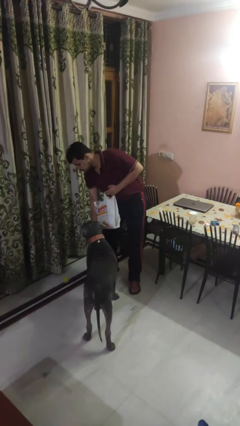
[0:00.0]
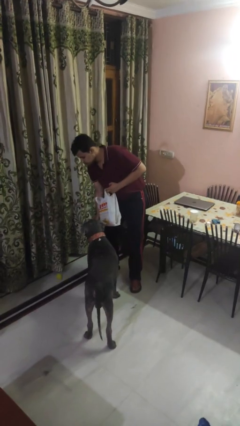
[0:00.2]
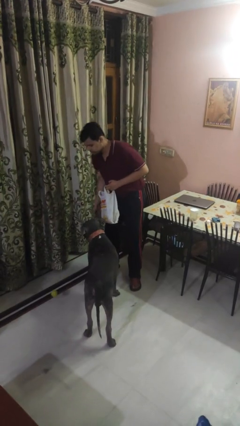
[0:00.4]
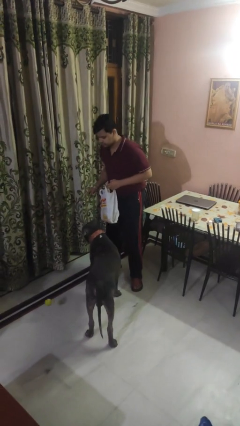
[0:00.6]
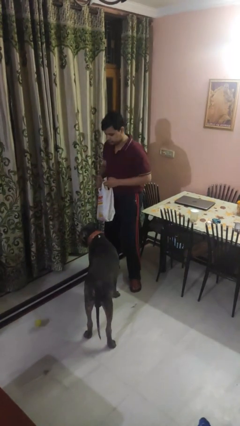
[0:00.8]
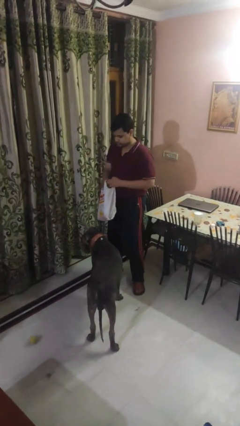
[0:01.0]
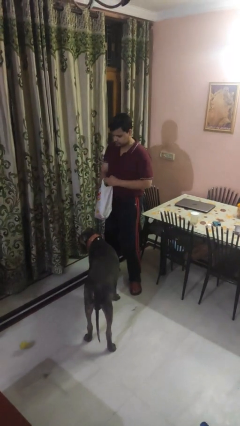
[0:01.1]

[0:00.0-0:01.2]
person throws object to dog

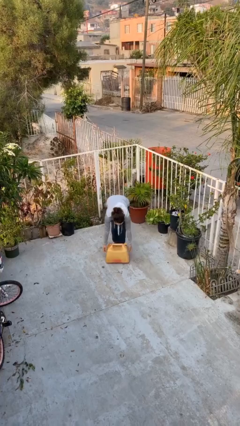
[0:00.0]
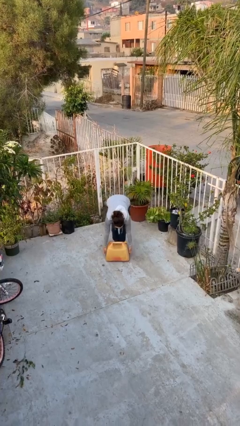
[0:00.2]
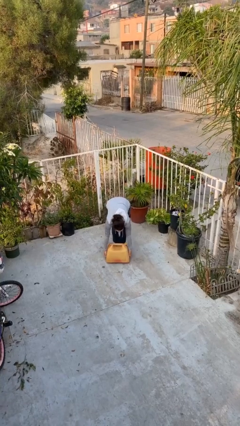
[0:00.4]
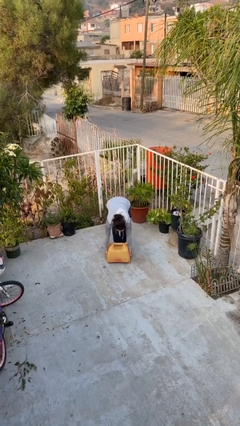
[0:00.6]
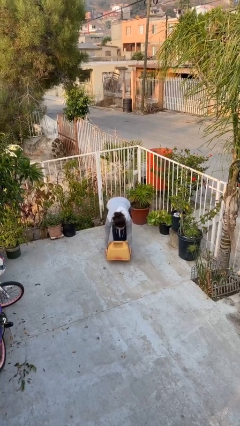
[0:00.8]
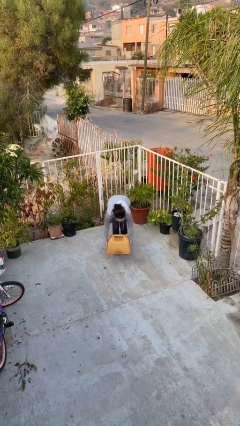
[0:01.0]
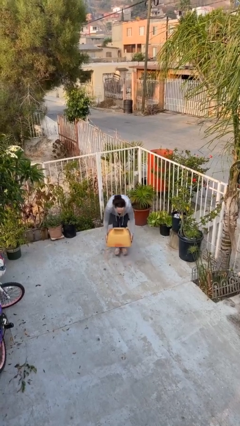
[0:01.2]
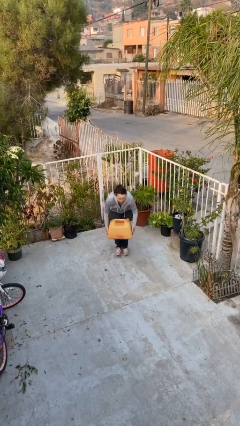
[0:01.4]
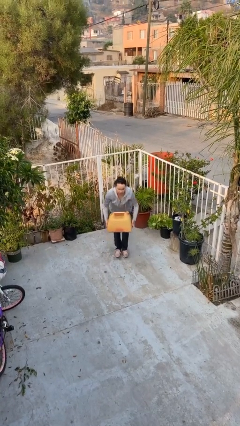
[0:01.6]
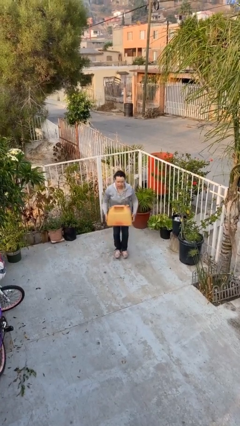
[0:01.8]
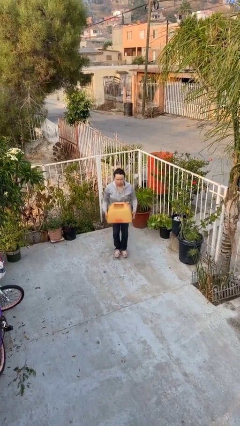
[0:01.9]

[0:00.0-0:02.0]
person picks up object from floor

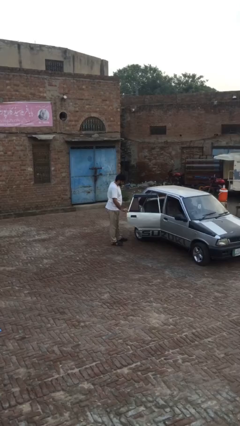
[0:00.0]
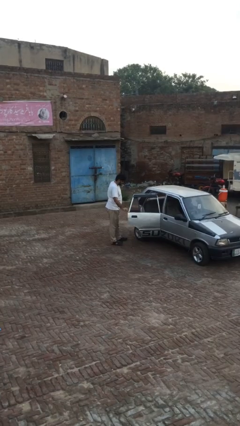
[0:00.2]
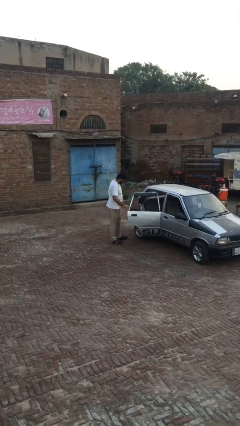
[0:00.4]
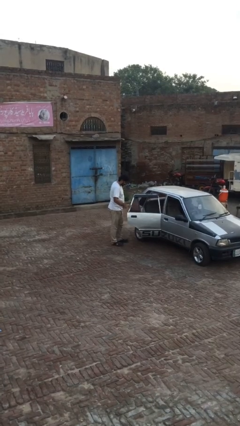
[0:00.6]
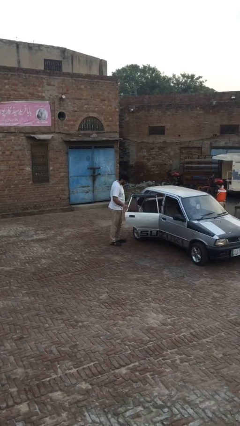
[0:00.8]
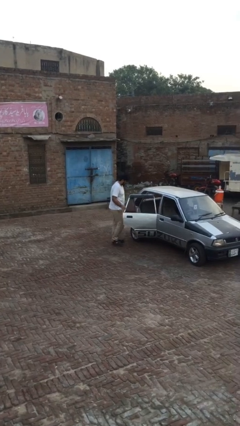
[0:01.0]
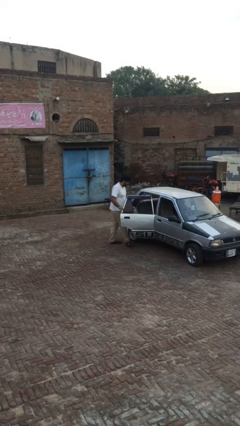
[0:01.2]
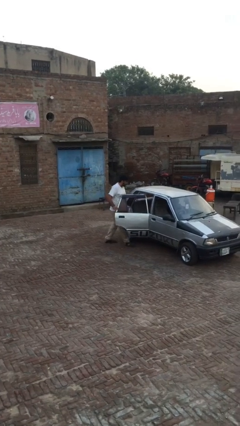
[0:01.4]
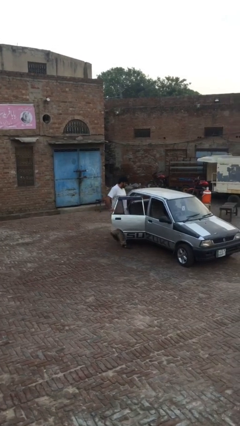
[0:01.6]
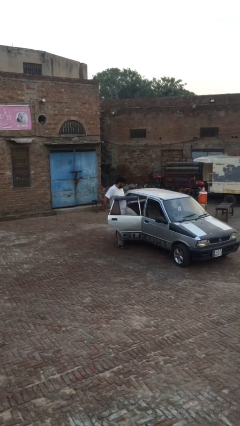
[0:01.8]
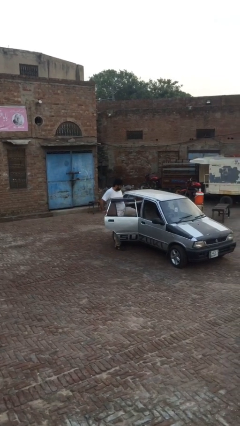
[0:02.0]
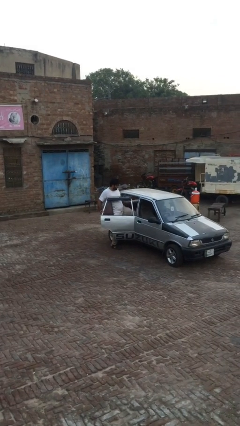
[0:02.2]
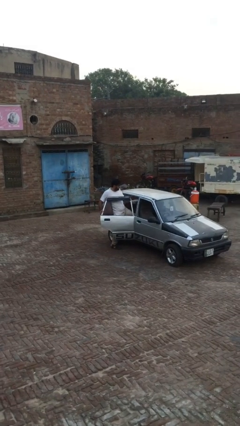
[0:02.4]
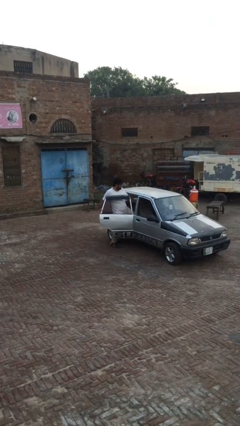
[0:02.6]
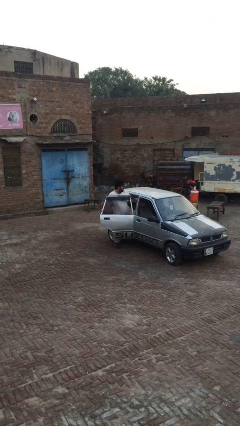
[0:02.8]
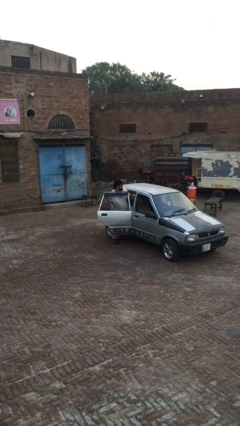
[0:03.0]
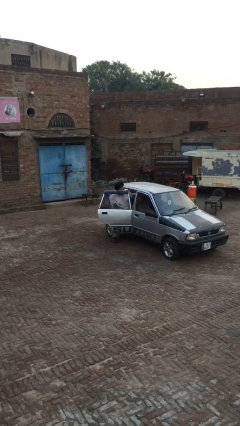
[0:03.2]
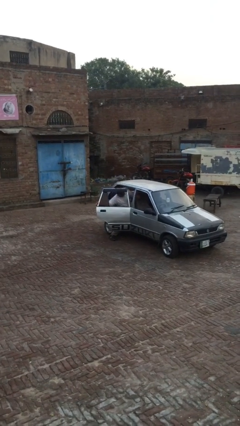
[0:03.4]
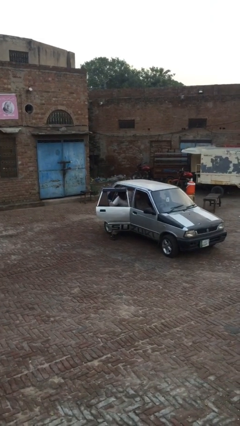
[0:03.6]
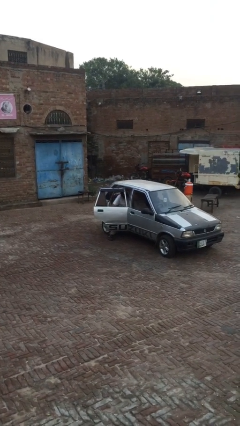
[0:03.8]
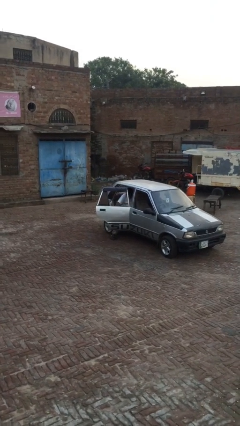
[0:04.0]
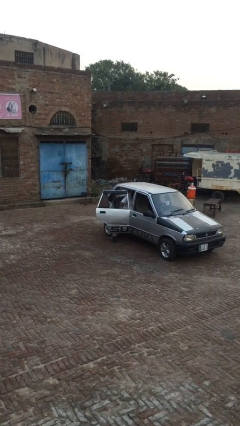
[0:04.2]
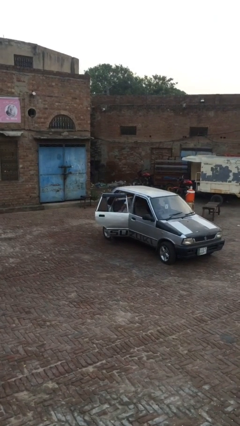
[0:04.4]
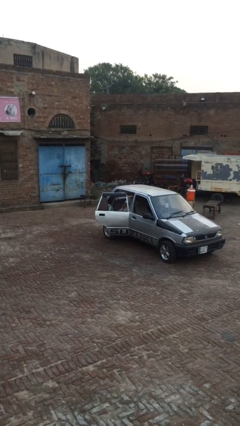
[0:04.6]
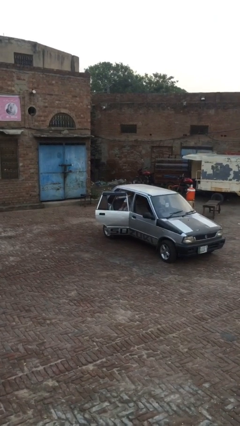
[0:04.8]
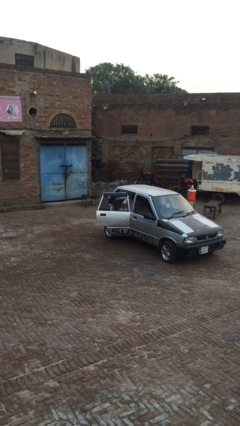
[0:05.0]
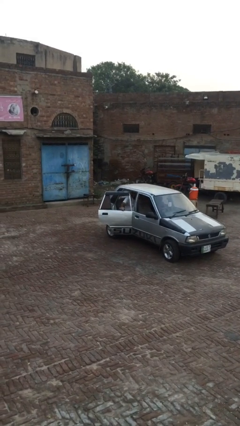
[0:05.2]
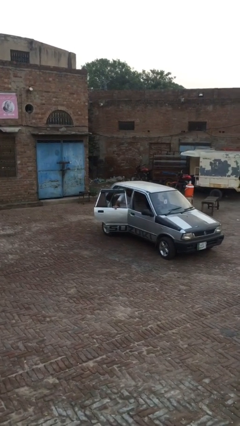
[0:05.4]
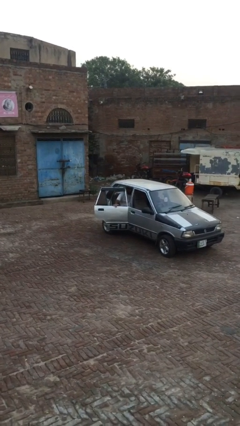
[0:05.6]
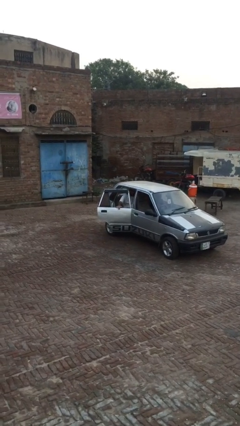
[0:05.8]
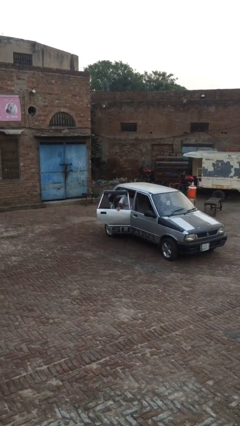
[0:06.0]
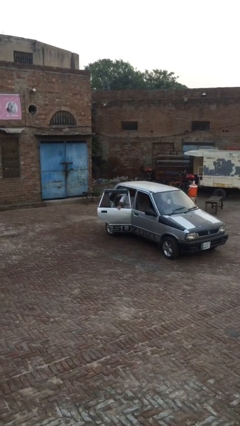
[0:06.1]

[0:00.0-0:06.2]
person enters car

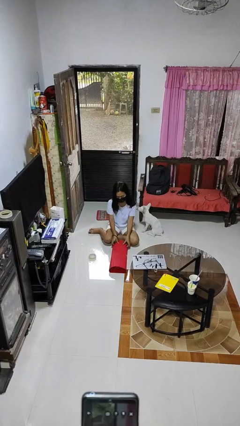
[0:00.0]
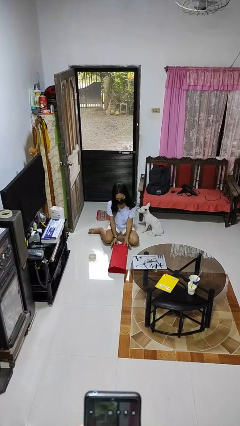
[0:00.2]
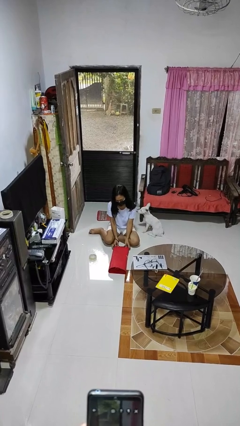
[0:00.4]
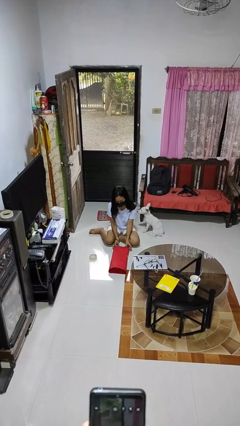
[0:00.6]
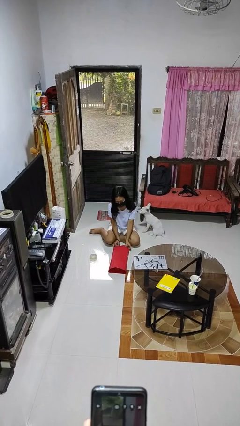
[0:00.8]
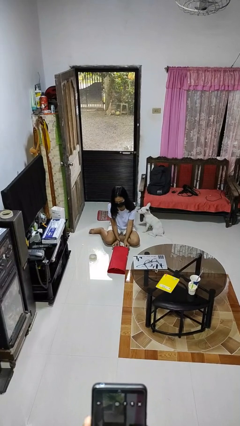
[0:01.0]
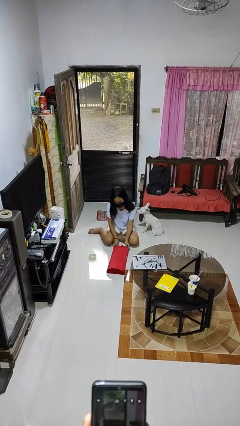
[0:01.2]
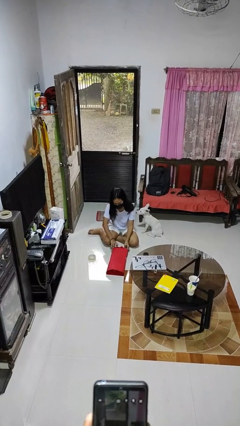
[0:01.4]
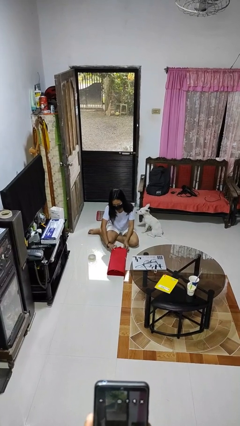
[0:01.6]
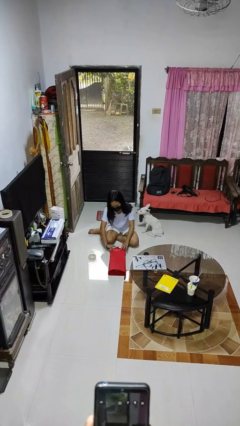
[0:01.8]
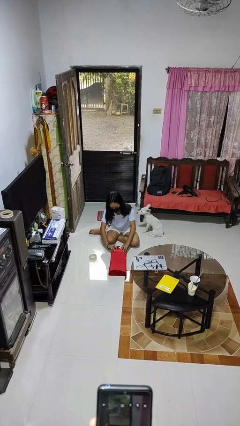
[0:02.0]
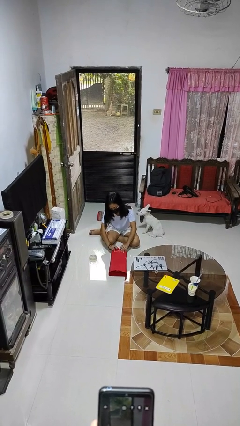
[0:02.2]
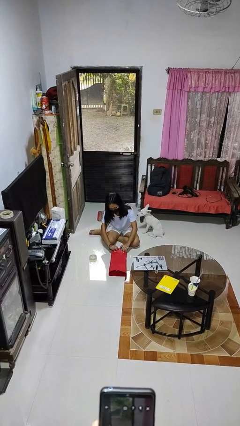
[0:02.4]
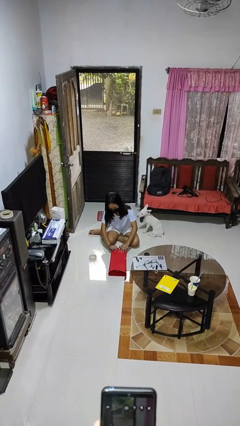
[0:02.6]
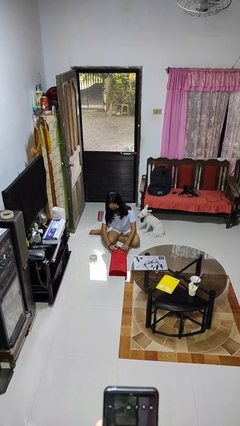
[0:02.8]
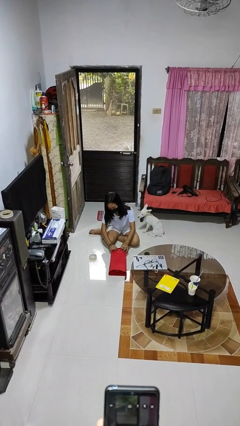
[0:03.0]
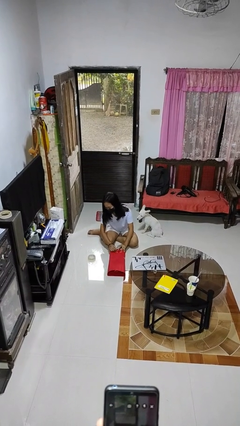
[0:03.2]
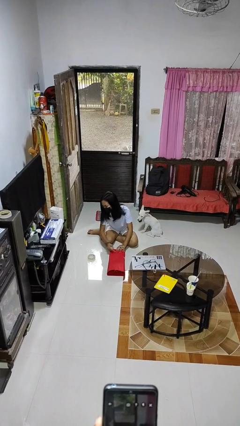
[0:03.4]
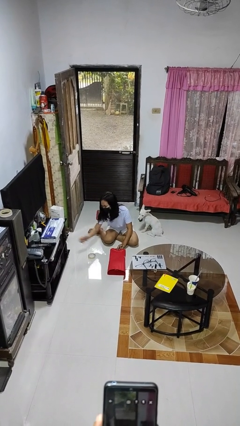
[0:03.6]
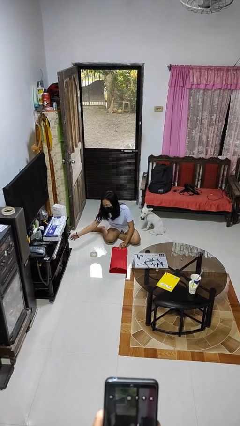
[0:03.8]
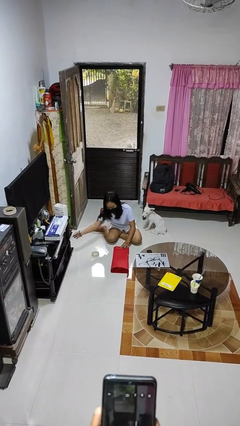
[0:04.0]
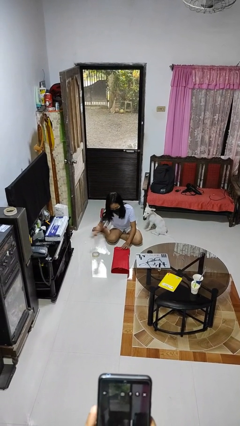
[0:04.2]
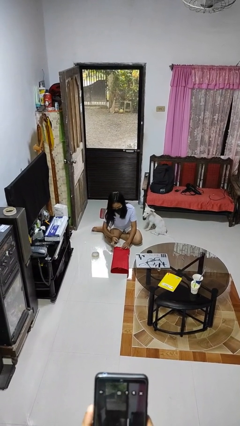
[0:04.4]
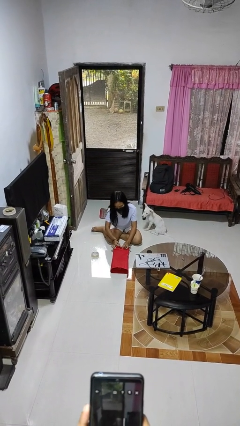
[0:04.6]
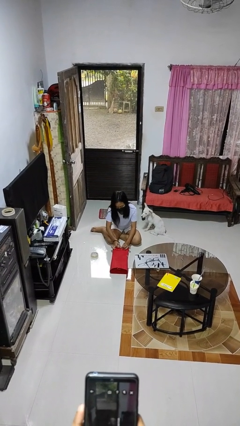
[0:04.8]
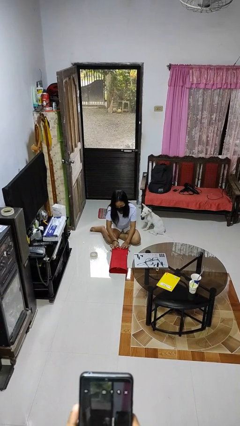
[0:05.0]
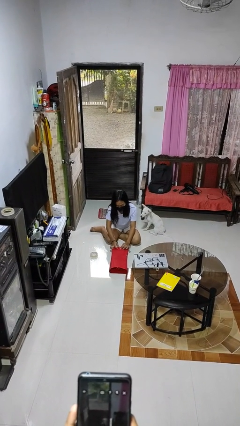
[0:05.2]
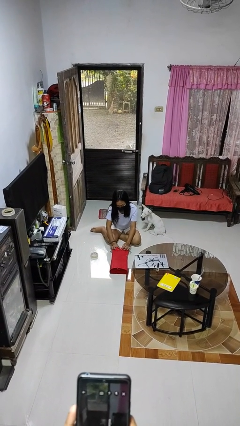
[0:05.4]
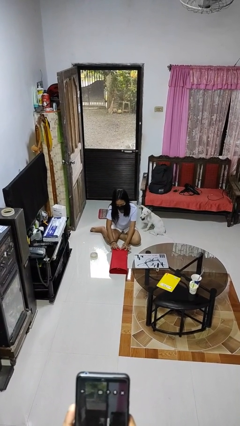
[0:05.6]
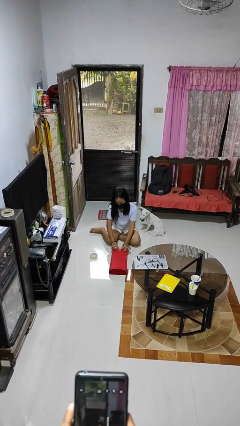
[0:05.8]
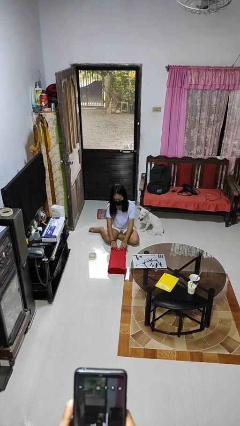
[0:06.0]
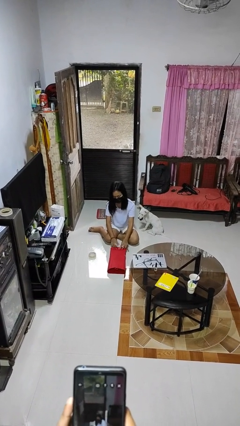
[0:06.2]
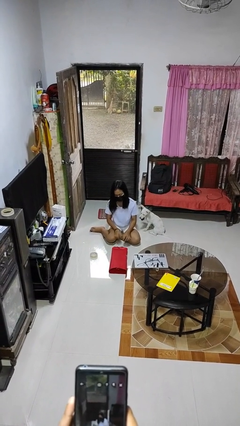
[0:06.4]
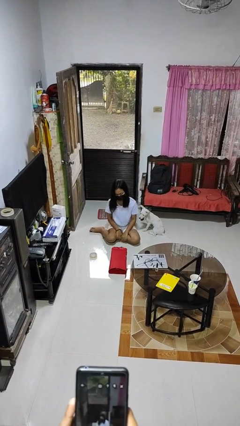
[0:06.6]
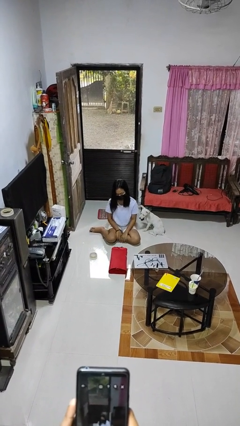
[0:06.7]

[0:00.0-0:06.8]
person wraps box

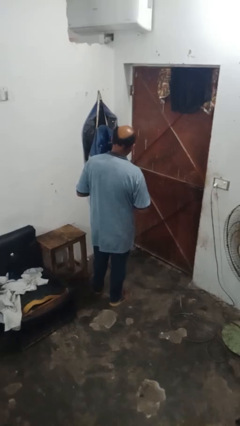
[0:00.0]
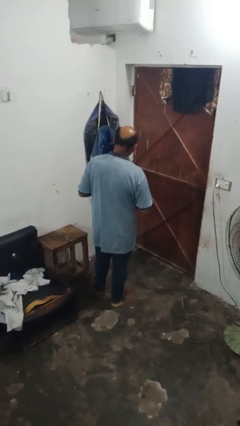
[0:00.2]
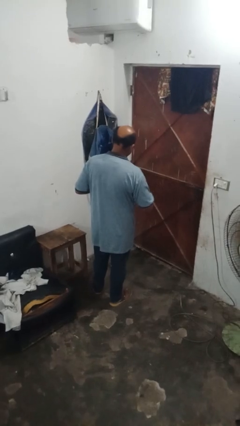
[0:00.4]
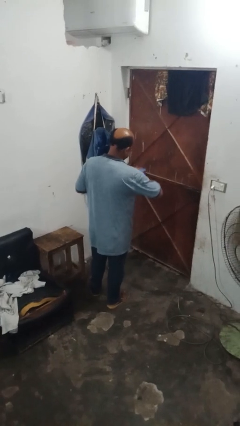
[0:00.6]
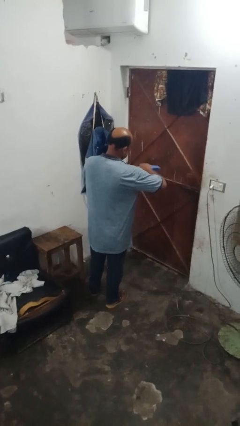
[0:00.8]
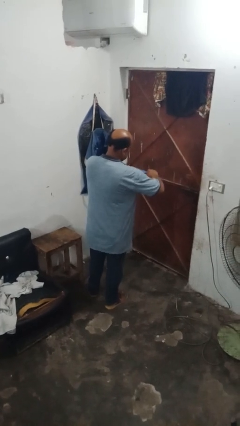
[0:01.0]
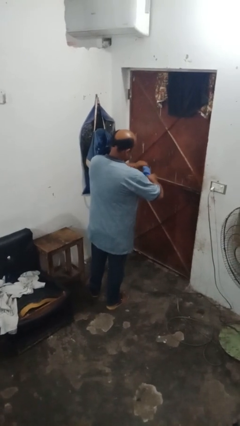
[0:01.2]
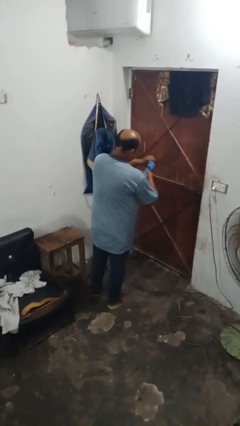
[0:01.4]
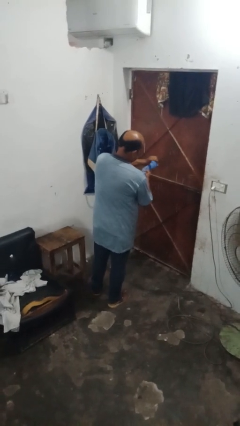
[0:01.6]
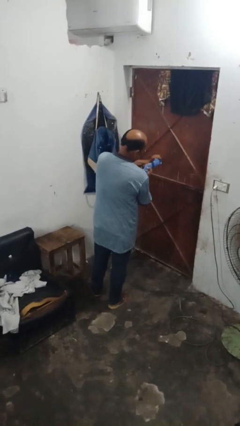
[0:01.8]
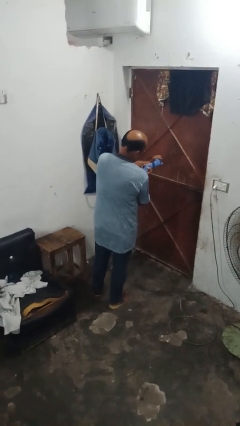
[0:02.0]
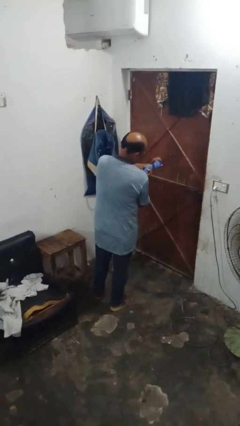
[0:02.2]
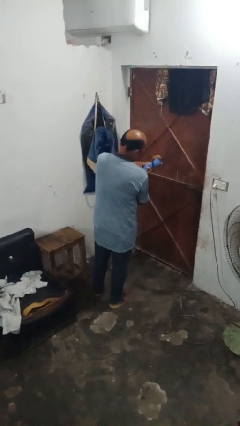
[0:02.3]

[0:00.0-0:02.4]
person squeezes object
